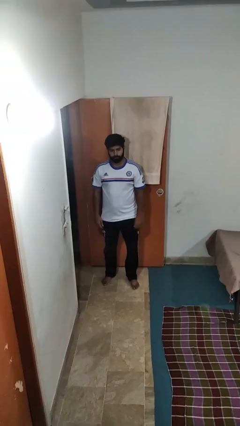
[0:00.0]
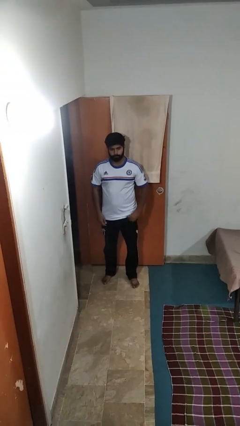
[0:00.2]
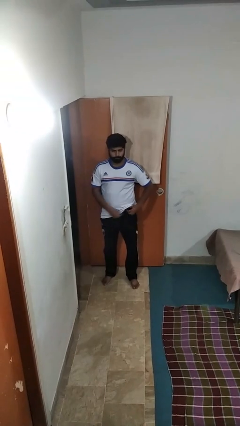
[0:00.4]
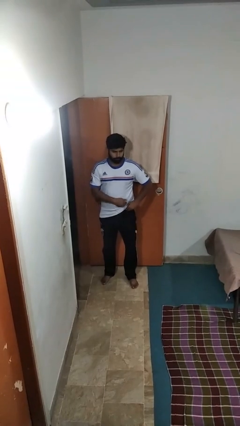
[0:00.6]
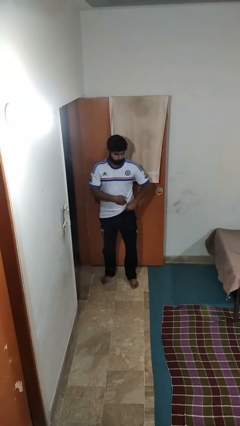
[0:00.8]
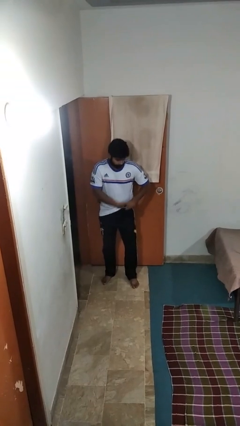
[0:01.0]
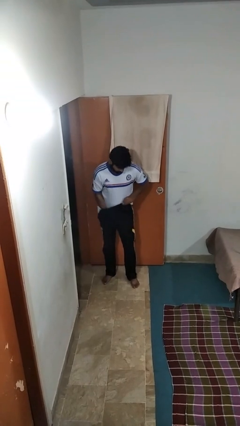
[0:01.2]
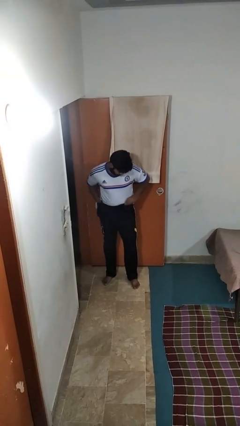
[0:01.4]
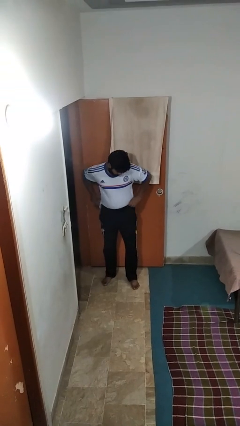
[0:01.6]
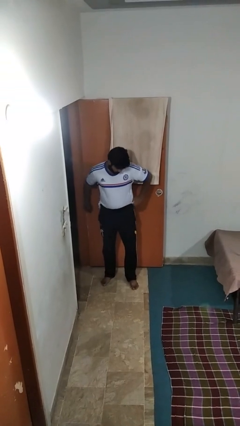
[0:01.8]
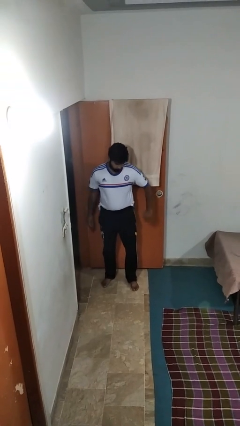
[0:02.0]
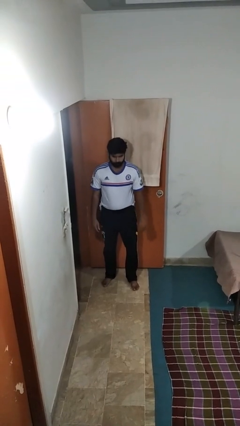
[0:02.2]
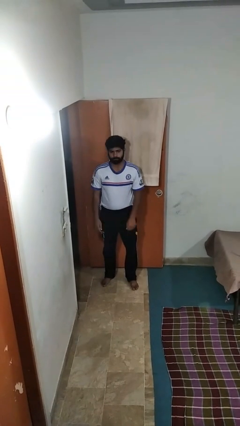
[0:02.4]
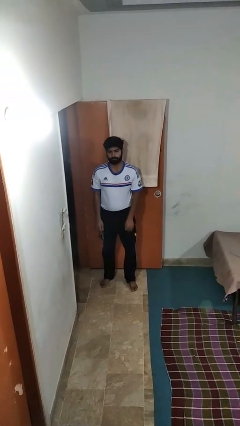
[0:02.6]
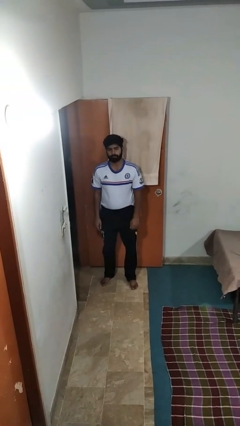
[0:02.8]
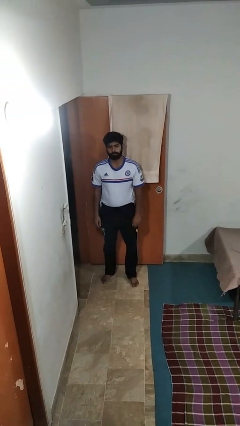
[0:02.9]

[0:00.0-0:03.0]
person tucks in shirt

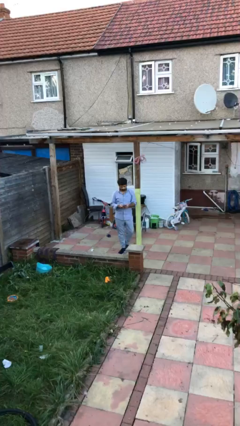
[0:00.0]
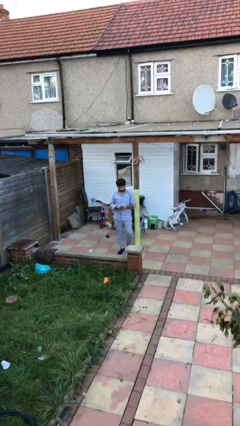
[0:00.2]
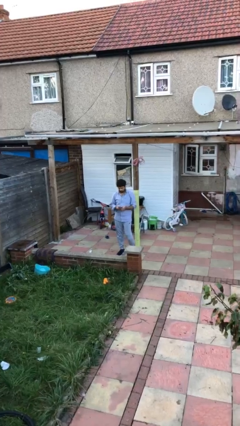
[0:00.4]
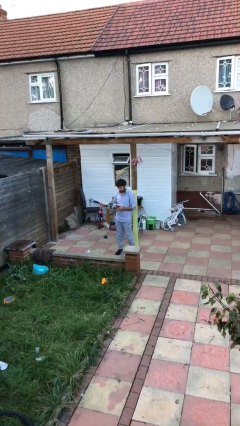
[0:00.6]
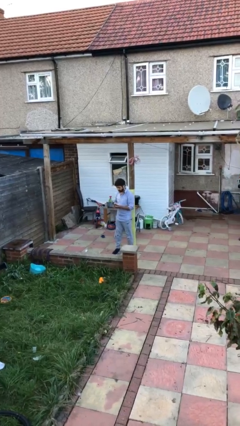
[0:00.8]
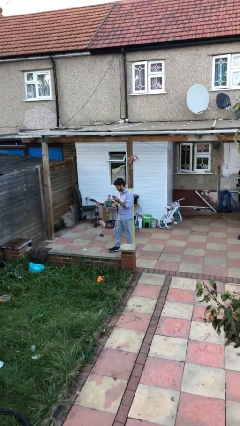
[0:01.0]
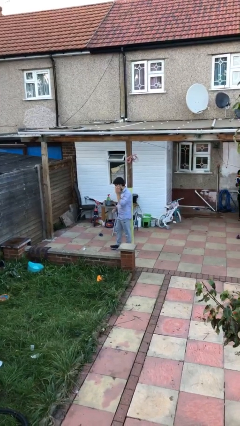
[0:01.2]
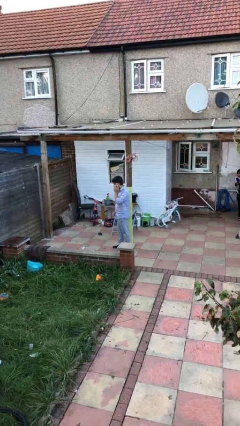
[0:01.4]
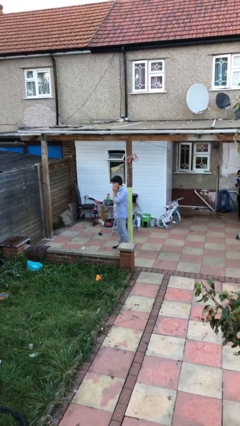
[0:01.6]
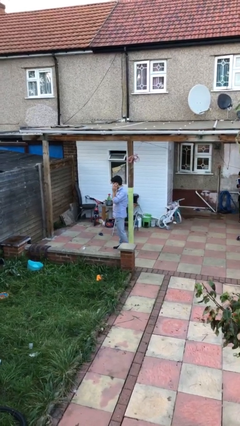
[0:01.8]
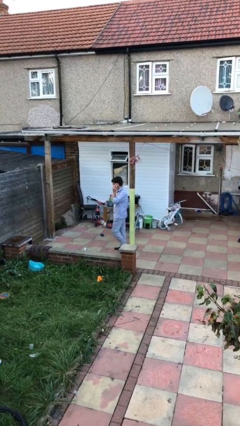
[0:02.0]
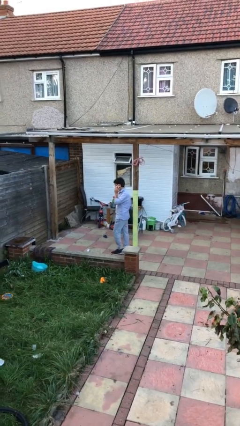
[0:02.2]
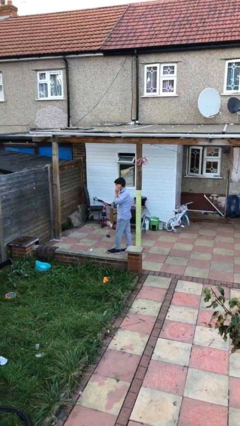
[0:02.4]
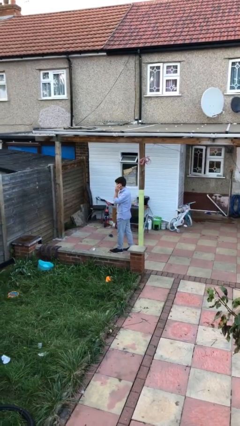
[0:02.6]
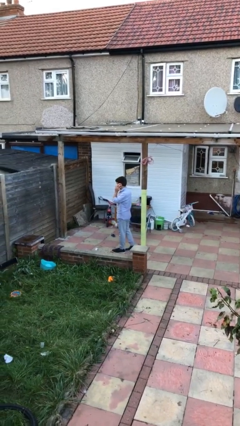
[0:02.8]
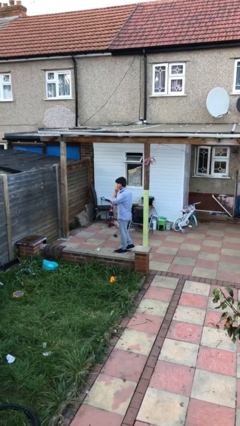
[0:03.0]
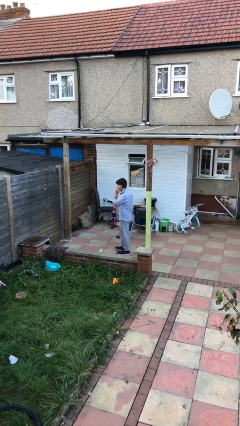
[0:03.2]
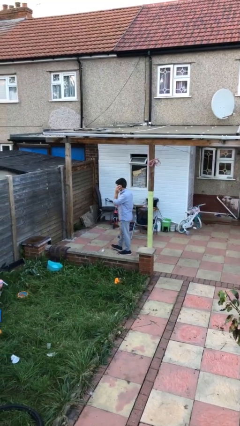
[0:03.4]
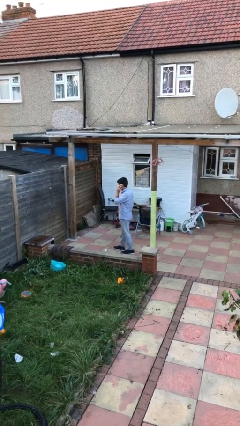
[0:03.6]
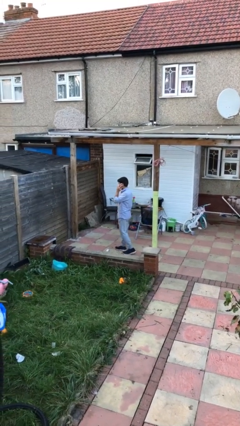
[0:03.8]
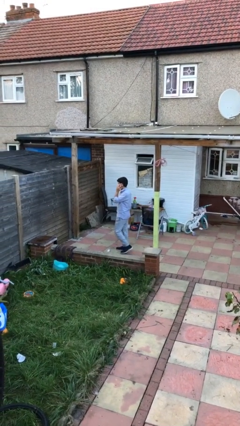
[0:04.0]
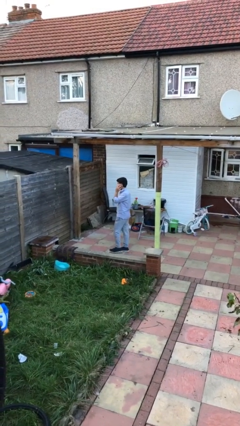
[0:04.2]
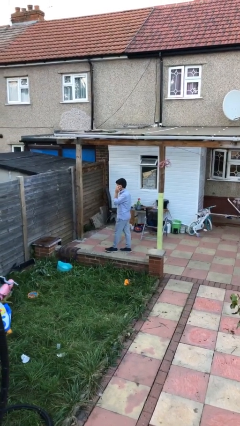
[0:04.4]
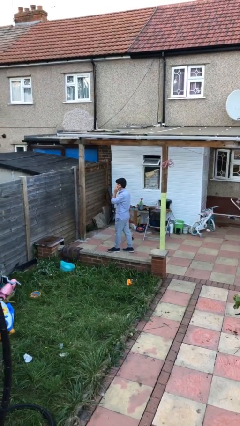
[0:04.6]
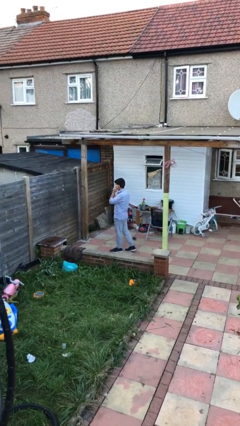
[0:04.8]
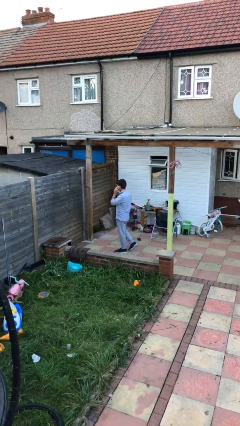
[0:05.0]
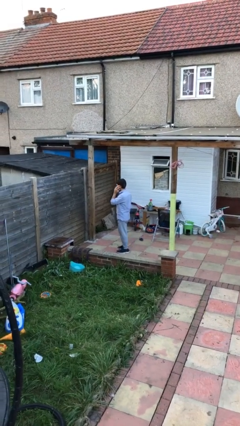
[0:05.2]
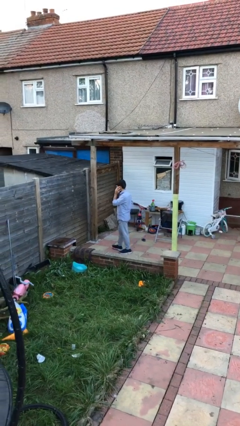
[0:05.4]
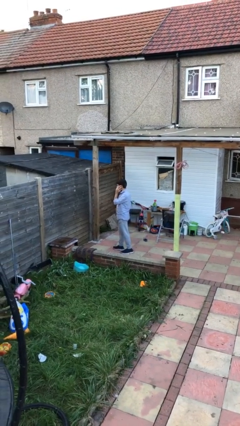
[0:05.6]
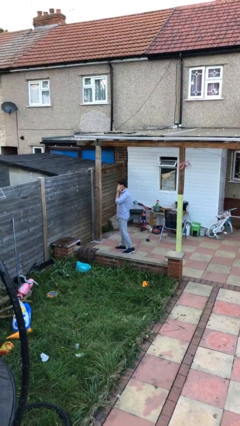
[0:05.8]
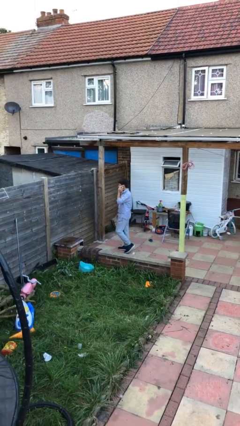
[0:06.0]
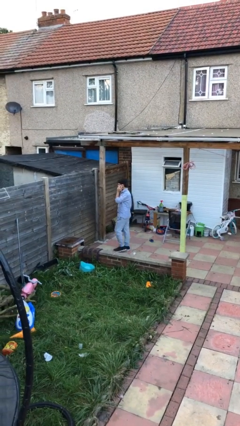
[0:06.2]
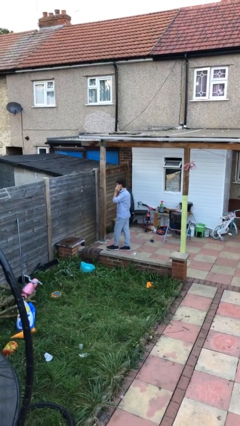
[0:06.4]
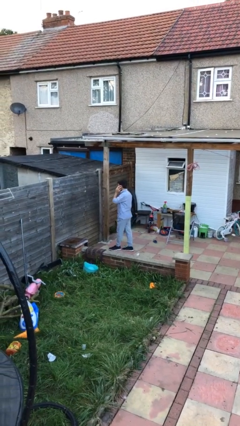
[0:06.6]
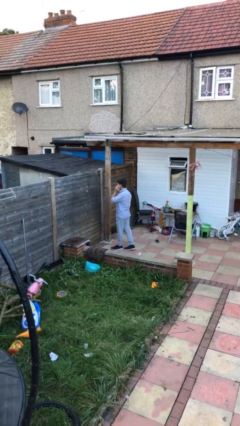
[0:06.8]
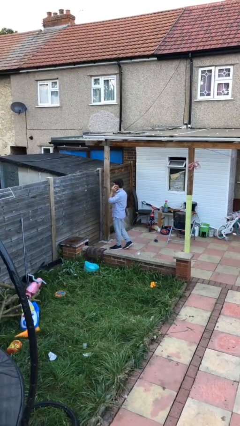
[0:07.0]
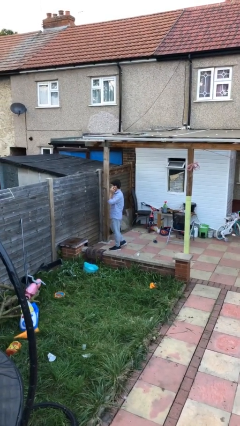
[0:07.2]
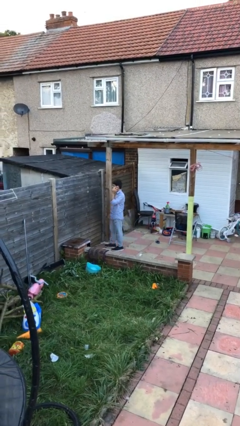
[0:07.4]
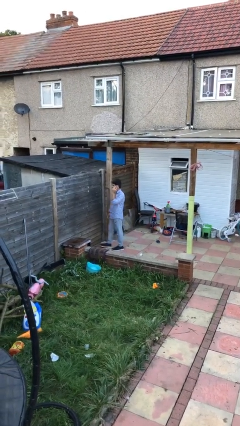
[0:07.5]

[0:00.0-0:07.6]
person talks on phone

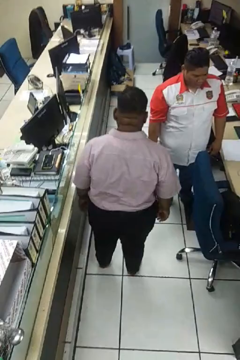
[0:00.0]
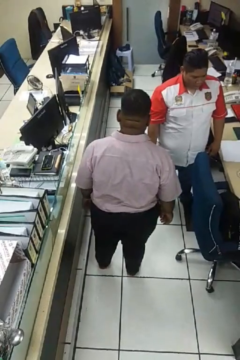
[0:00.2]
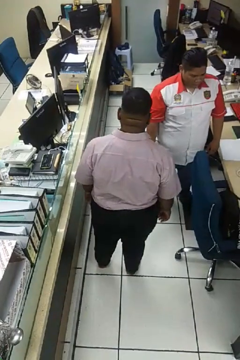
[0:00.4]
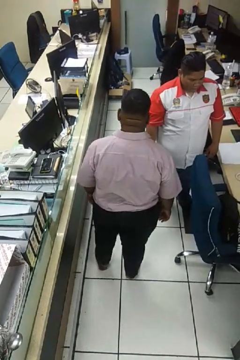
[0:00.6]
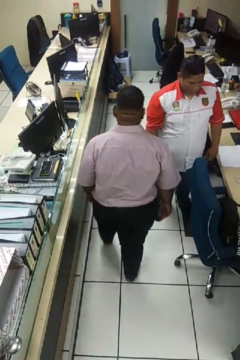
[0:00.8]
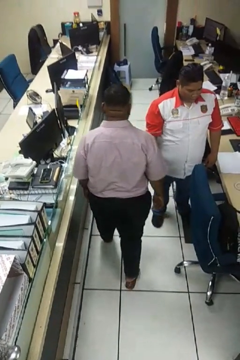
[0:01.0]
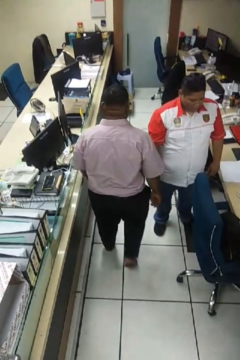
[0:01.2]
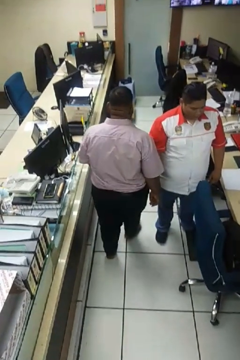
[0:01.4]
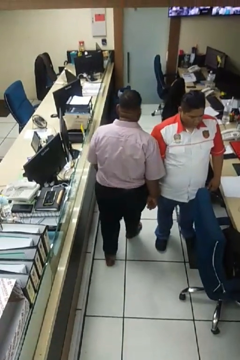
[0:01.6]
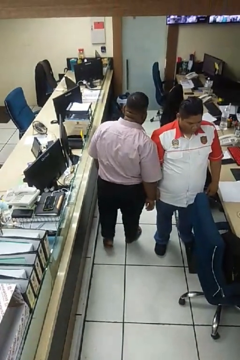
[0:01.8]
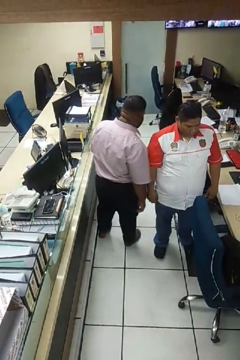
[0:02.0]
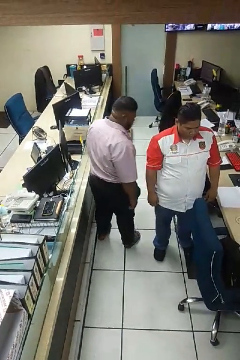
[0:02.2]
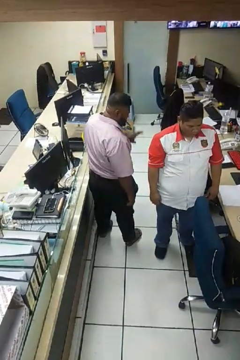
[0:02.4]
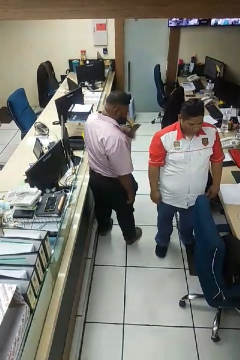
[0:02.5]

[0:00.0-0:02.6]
person bumps into person

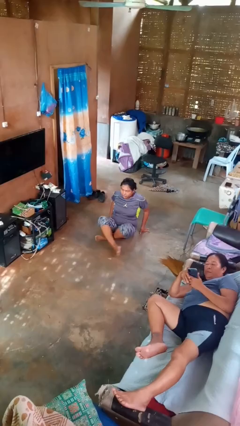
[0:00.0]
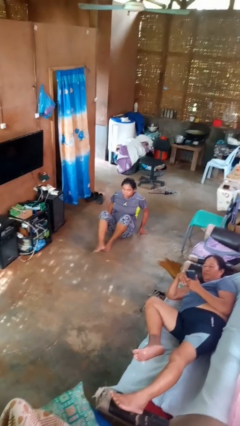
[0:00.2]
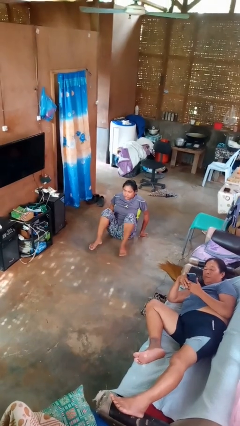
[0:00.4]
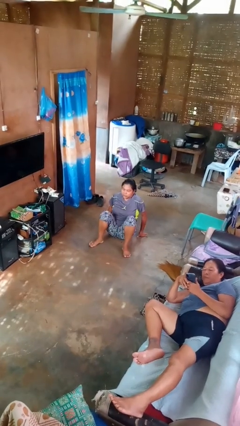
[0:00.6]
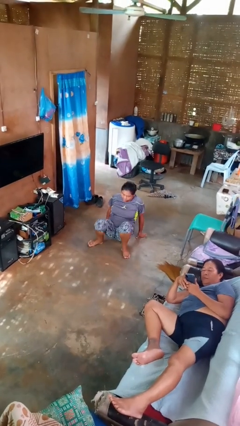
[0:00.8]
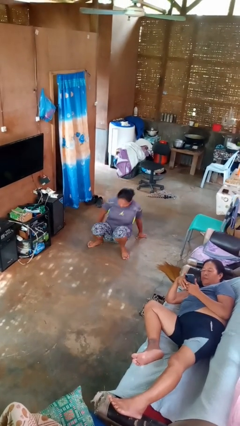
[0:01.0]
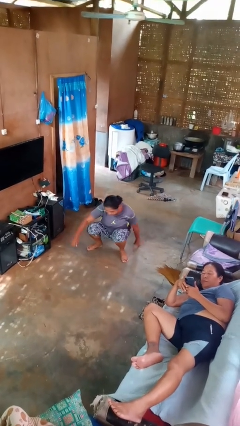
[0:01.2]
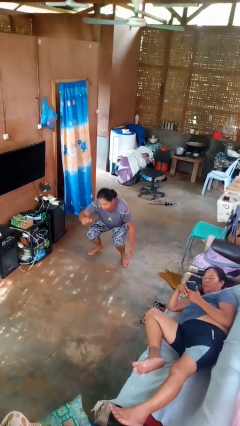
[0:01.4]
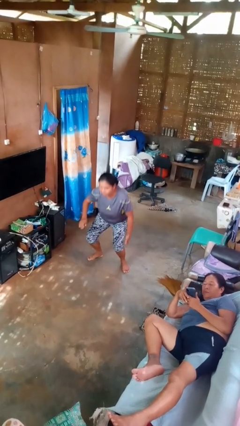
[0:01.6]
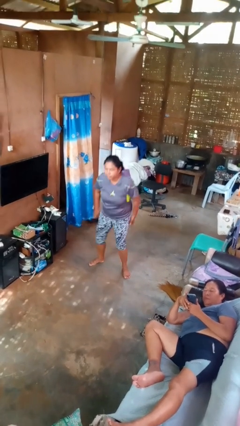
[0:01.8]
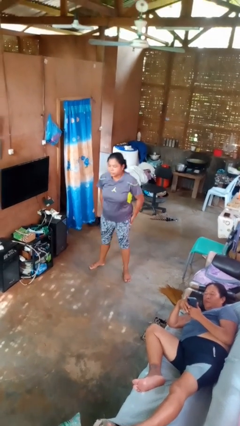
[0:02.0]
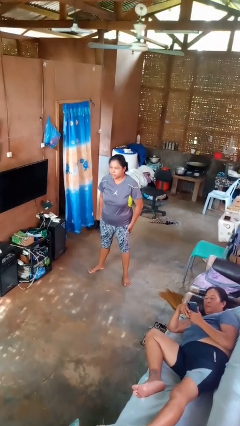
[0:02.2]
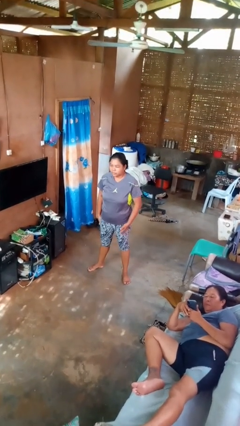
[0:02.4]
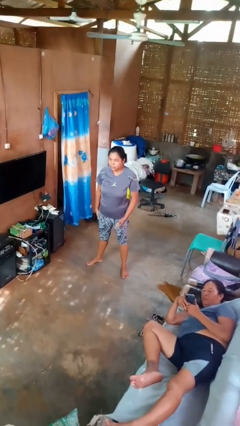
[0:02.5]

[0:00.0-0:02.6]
person stands up from floor

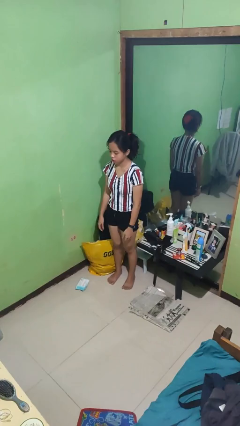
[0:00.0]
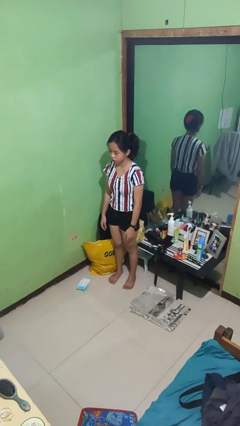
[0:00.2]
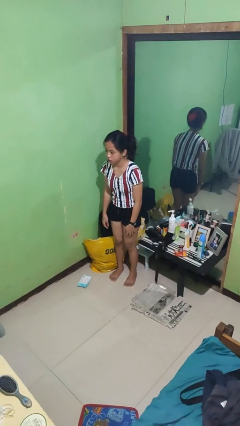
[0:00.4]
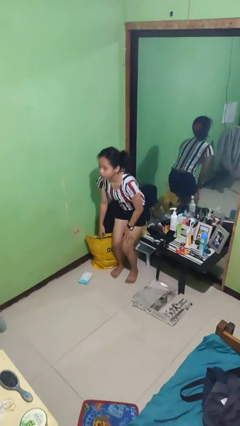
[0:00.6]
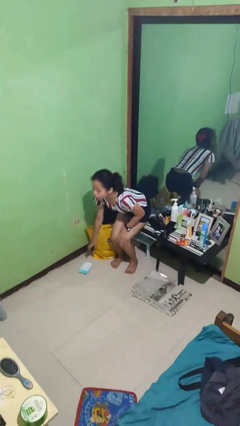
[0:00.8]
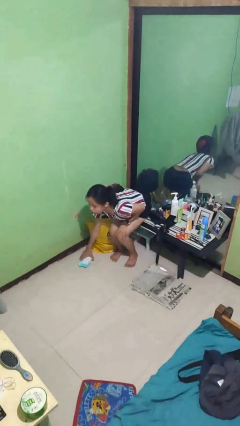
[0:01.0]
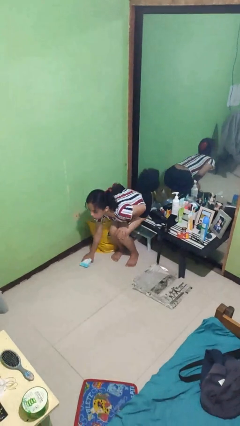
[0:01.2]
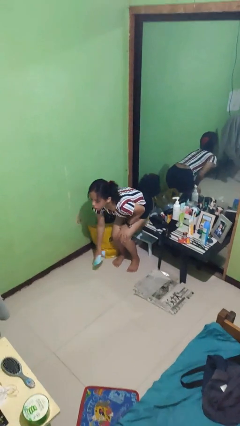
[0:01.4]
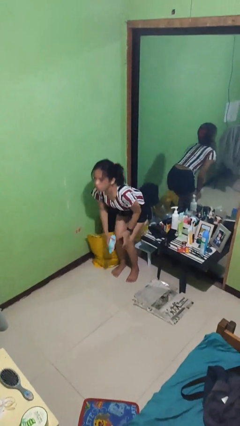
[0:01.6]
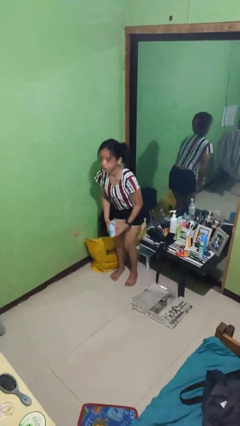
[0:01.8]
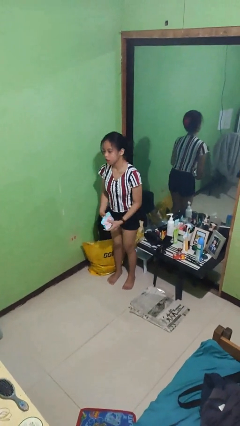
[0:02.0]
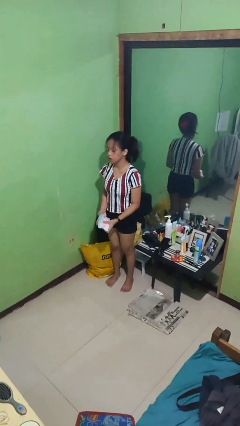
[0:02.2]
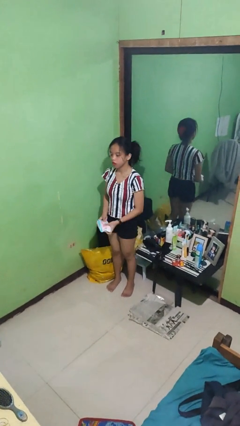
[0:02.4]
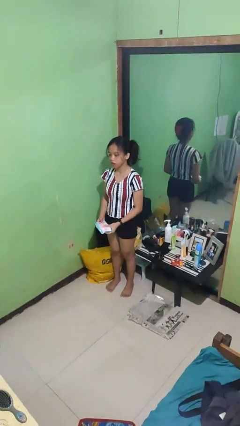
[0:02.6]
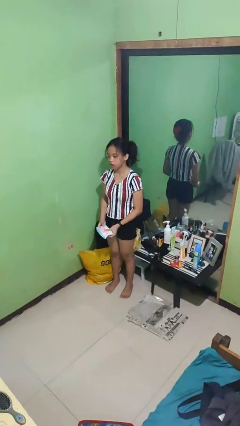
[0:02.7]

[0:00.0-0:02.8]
person picks up object from floor
